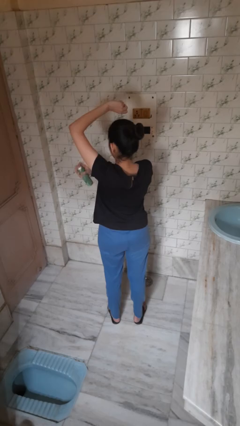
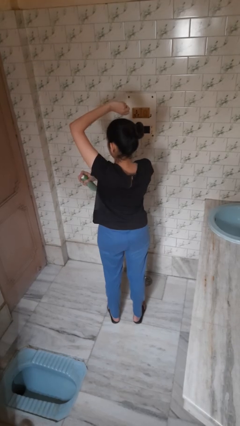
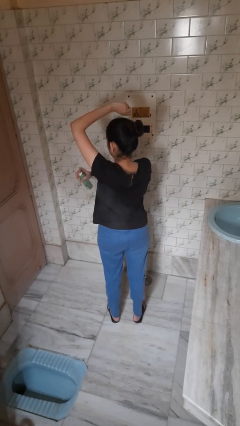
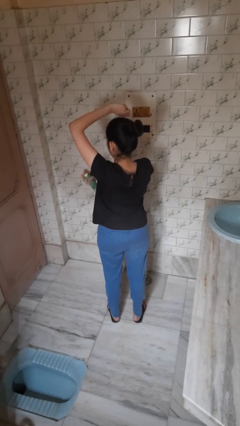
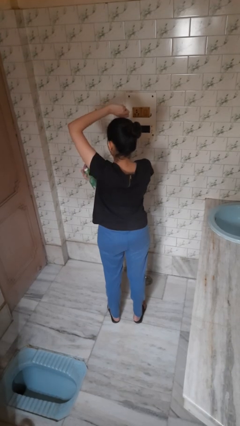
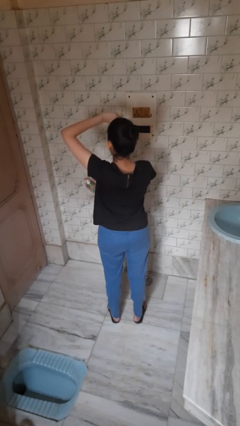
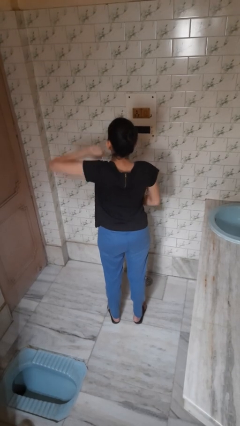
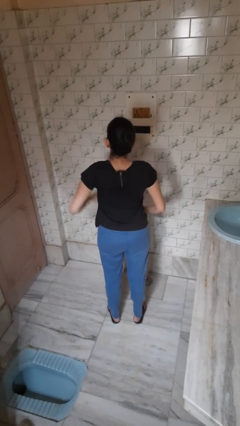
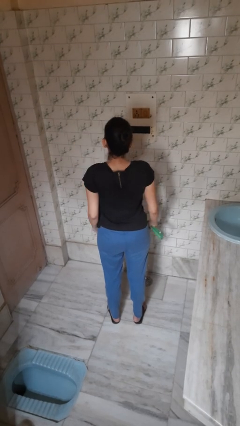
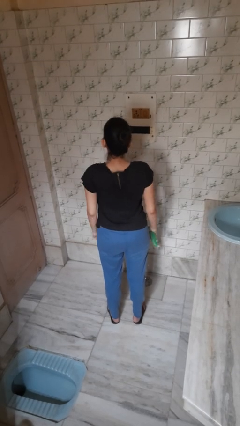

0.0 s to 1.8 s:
person applies deodorant

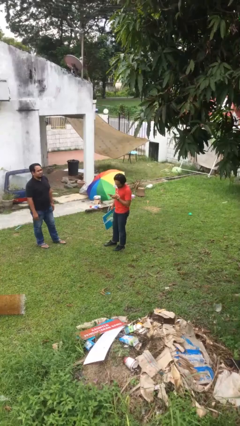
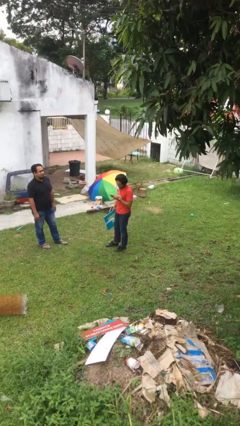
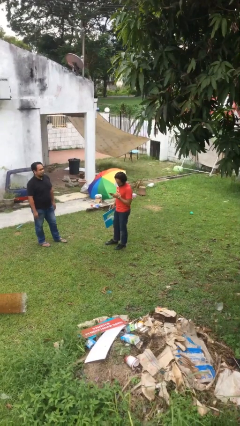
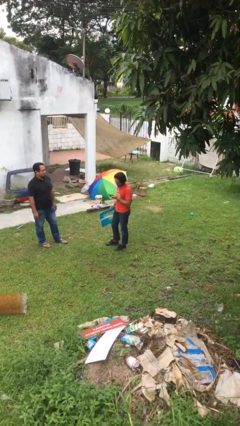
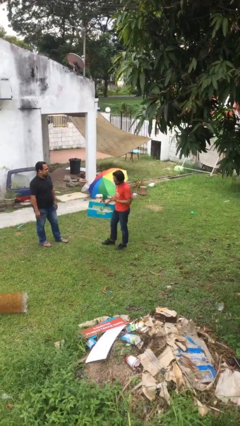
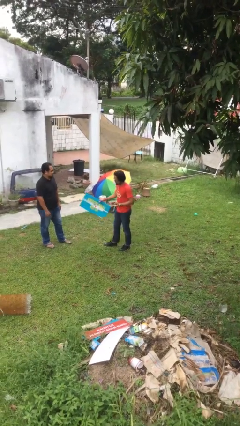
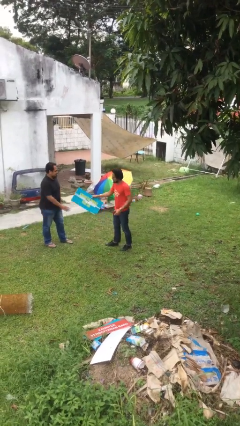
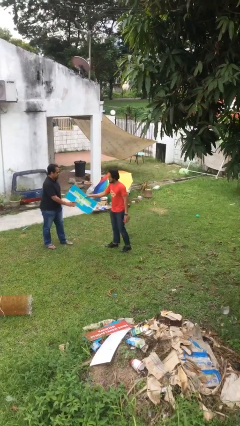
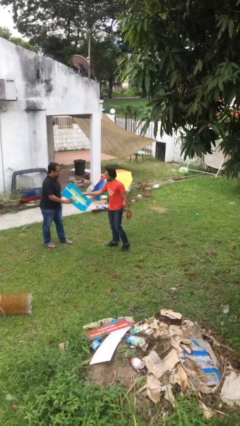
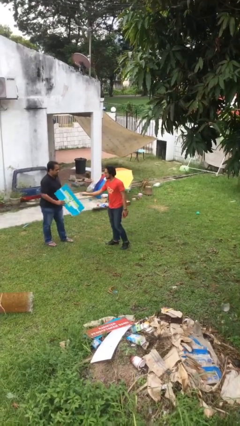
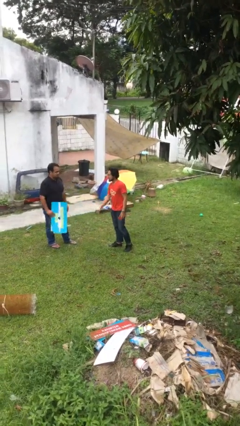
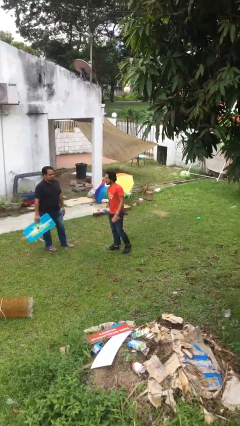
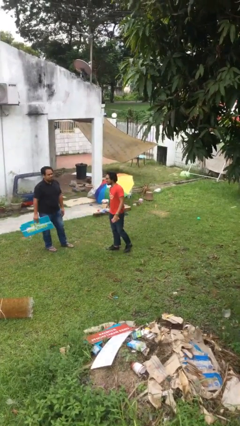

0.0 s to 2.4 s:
person transfers object to person

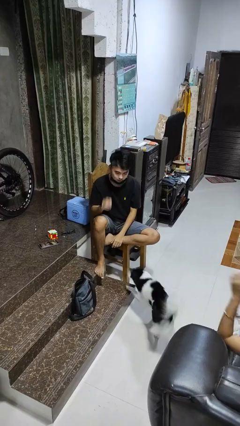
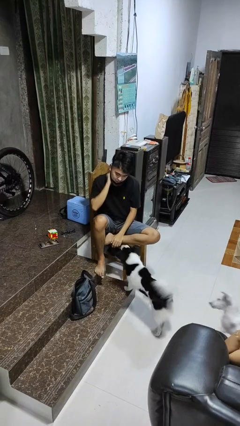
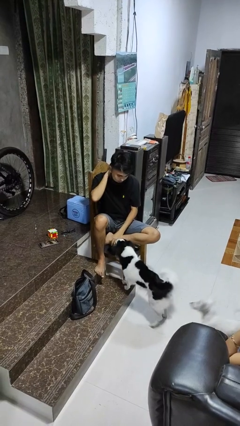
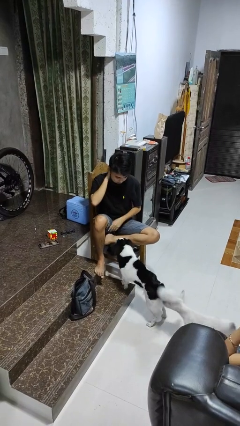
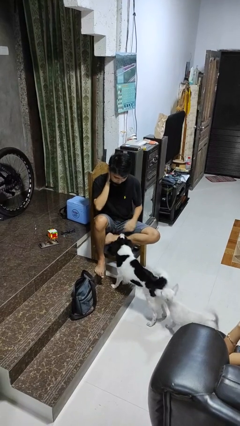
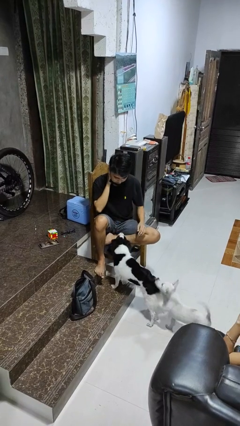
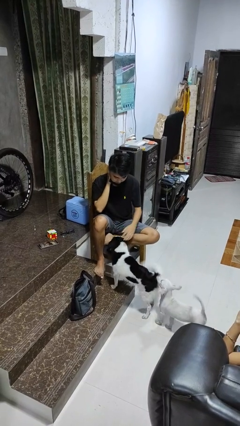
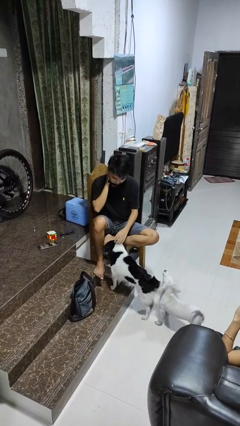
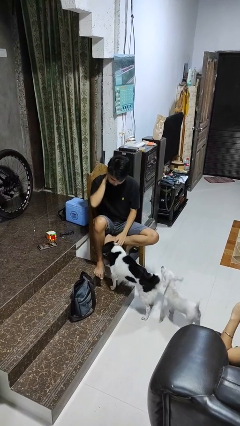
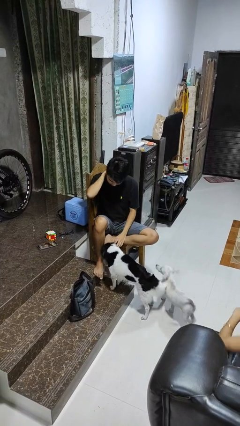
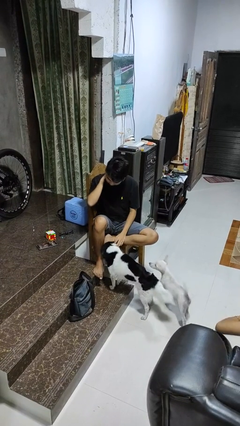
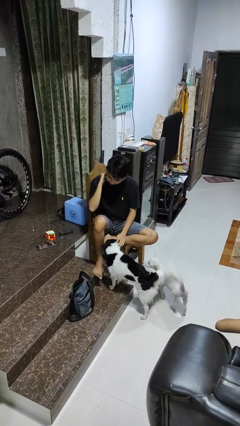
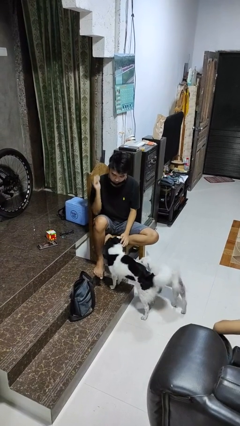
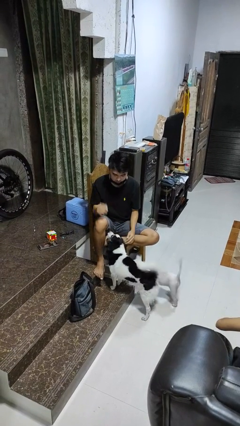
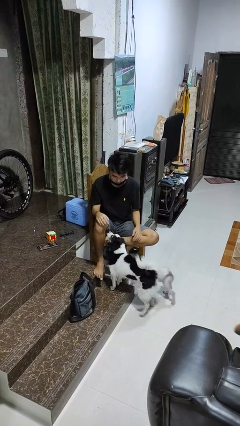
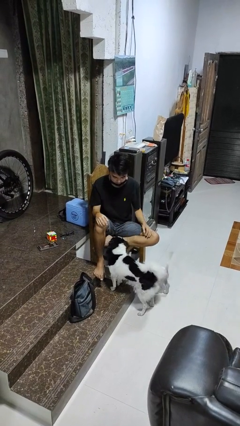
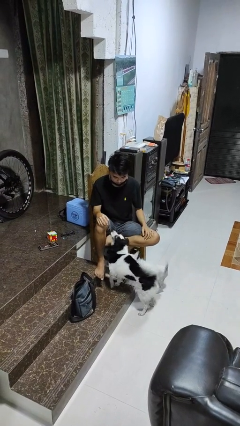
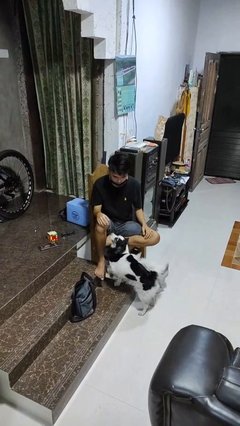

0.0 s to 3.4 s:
person rubs neck

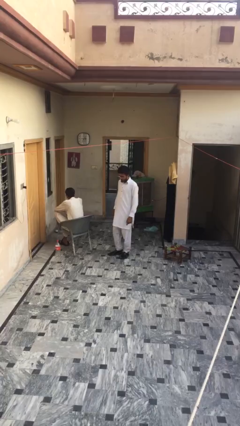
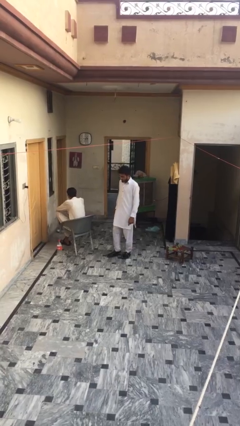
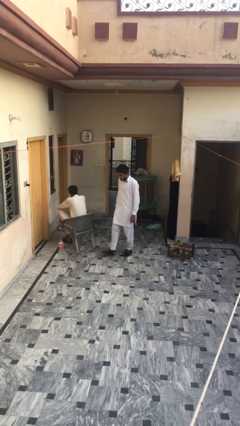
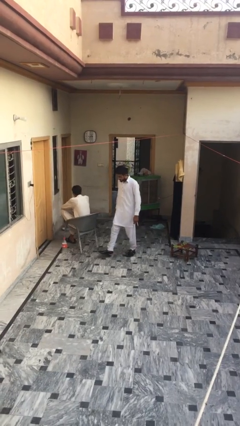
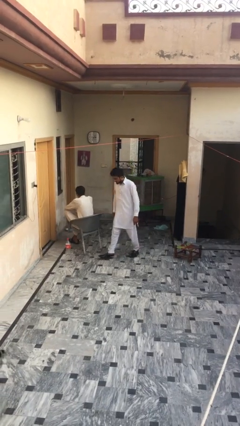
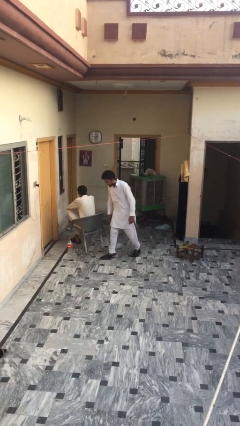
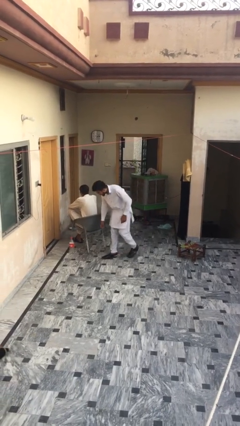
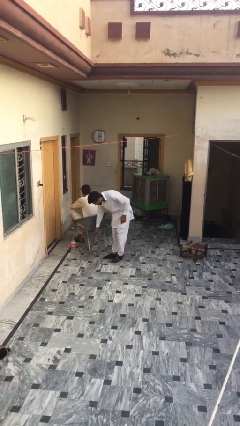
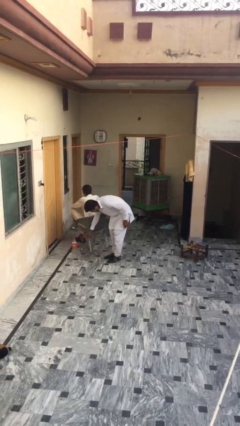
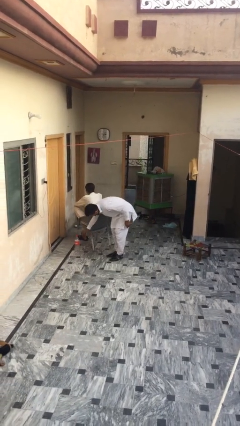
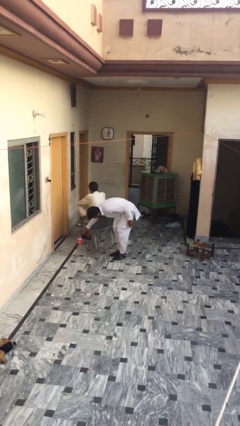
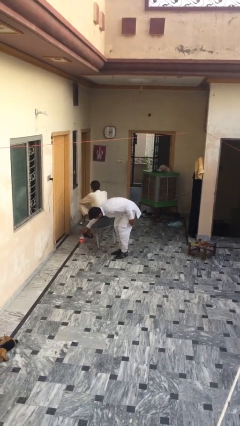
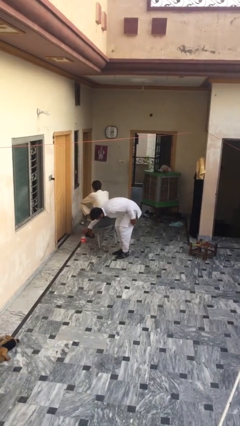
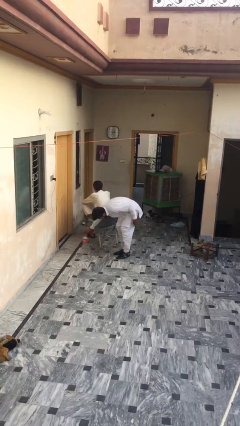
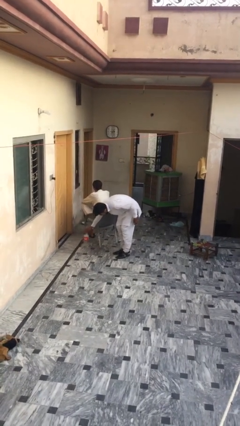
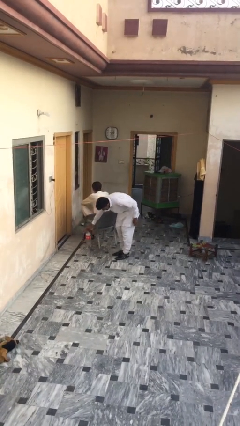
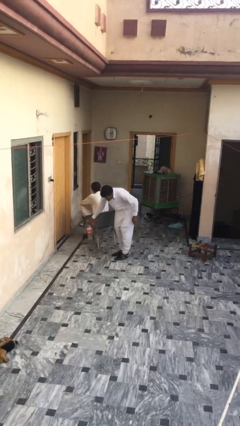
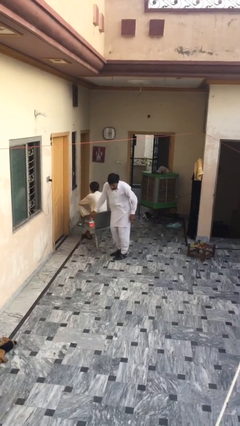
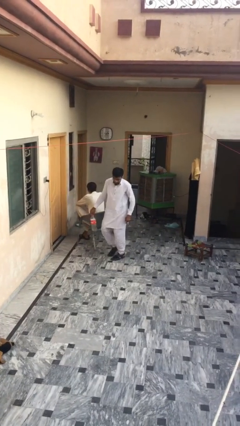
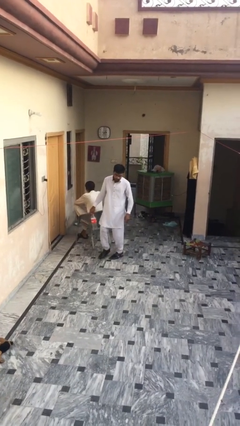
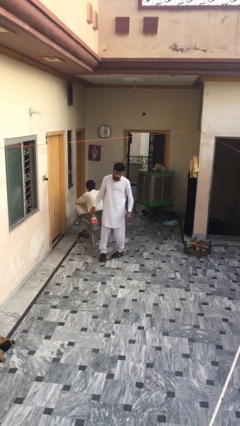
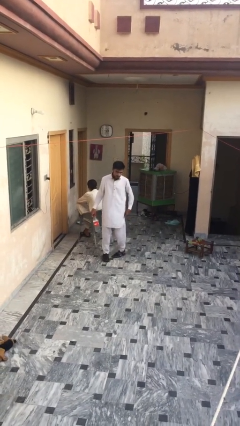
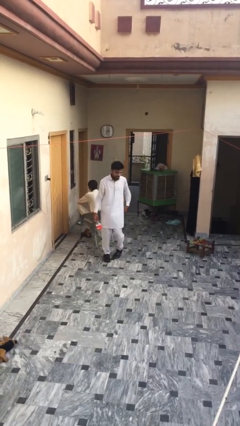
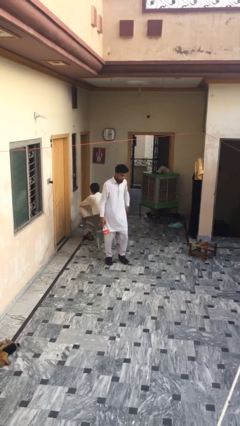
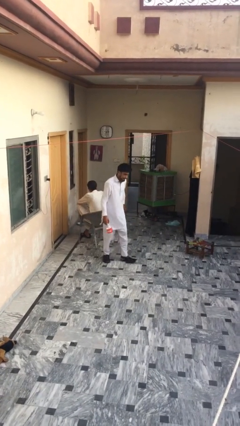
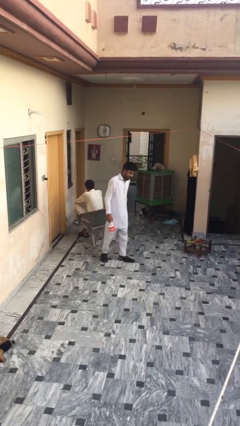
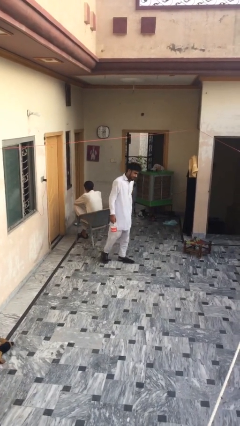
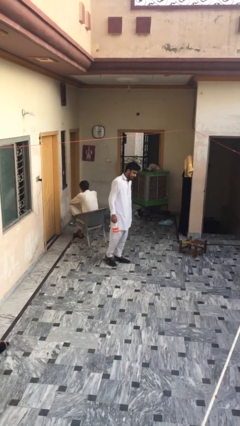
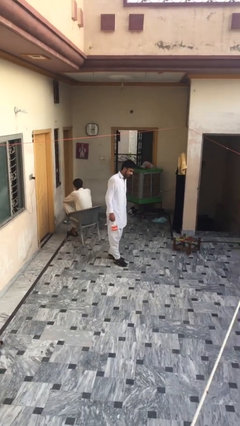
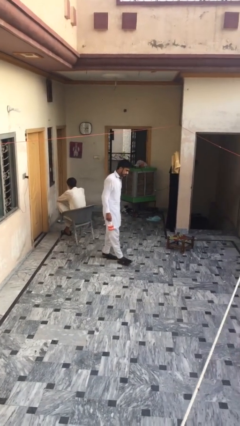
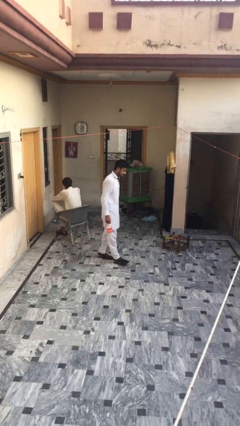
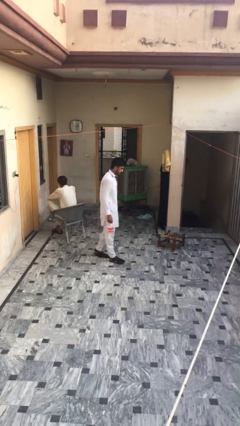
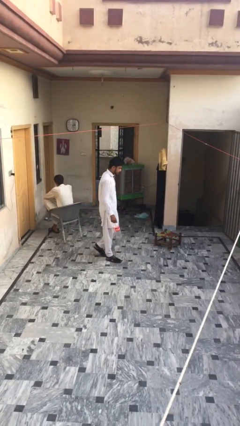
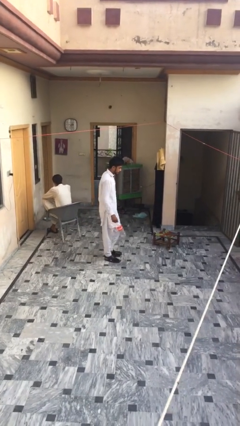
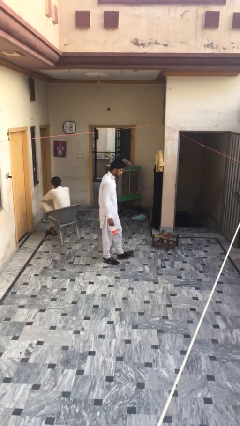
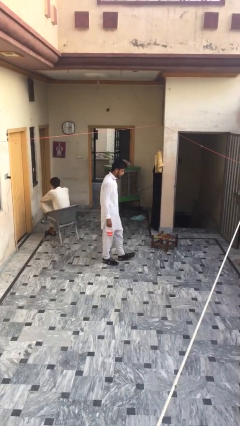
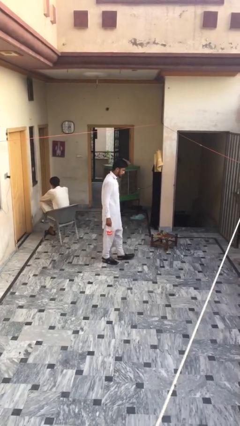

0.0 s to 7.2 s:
person steals object from person

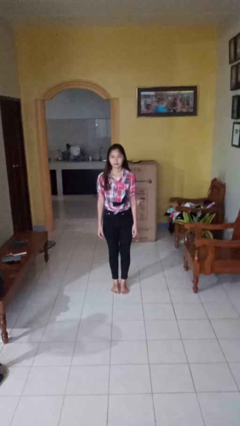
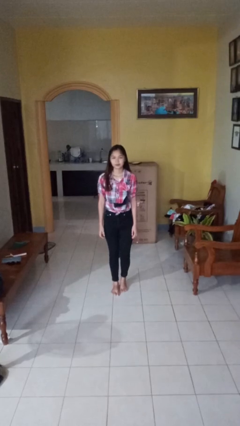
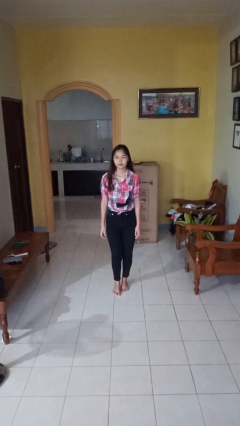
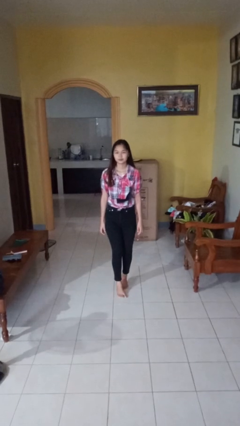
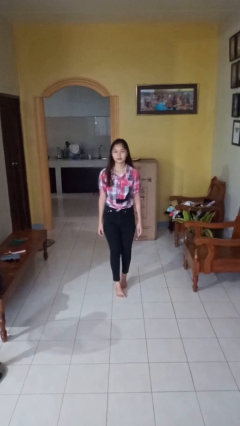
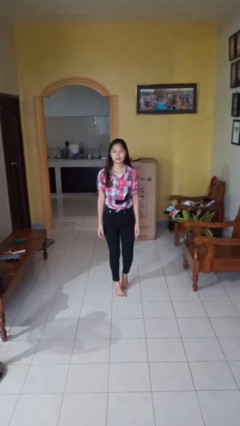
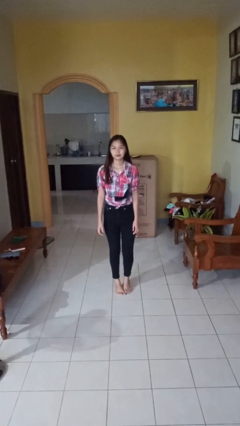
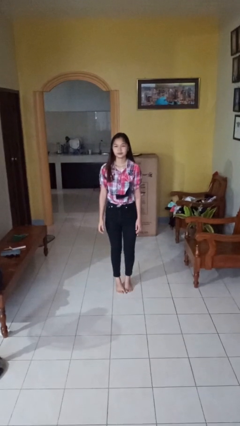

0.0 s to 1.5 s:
person walks tiptoe

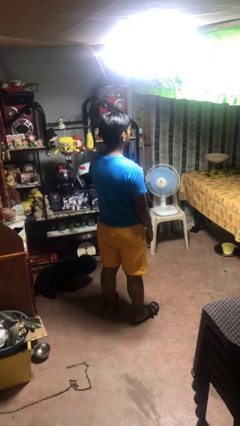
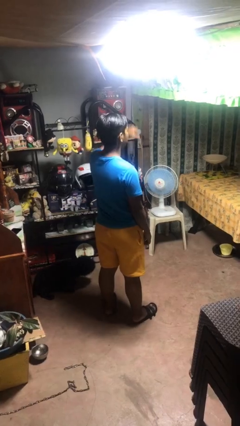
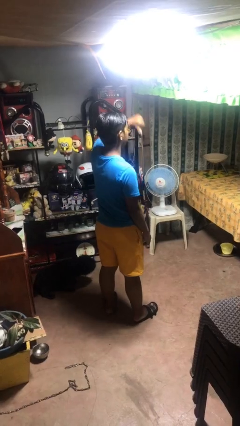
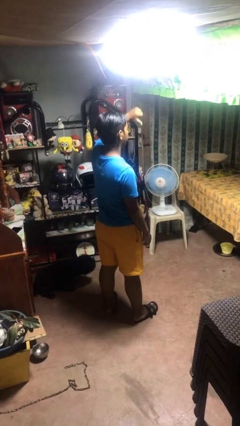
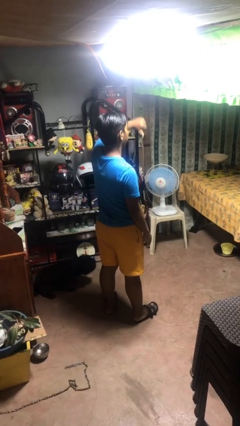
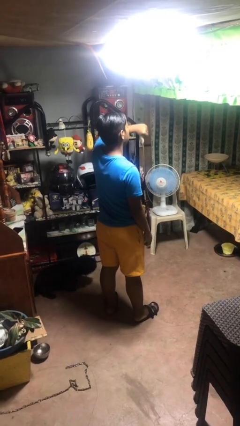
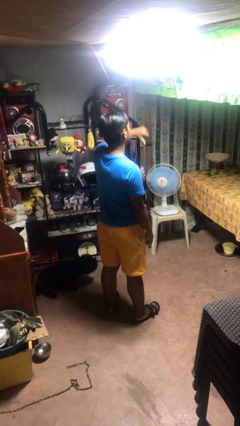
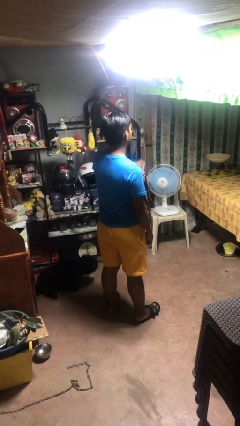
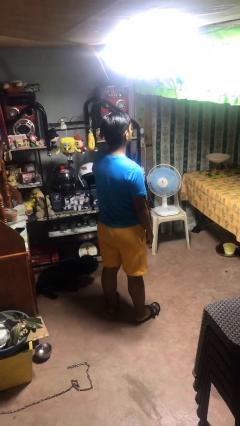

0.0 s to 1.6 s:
person gestures thumbs down
